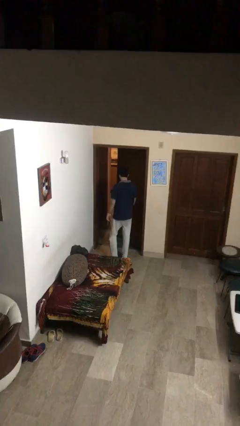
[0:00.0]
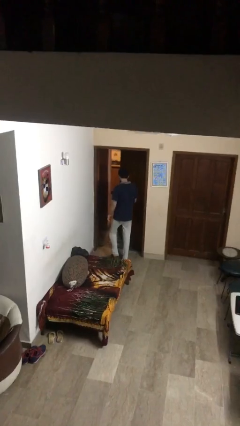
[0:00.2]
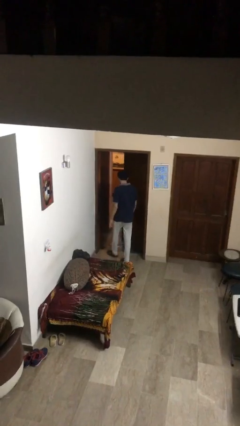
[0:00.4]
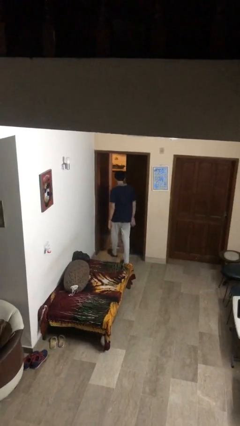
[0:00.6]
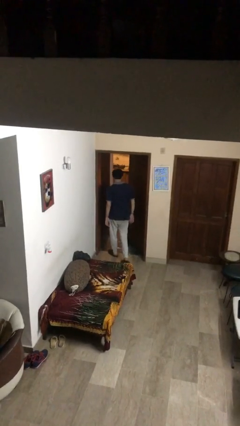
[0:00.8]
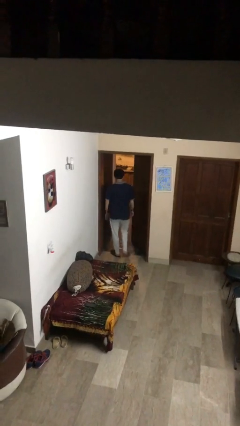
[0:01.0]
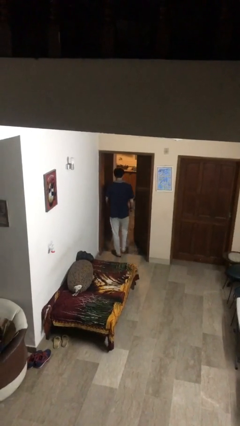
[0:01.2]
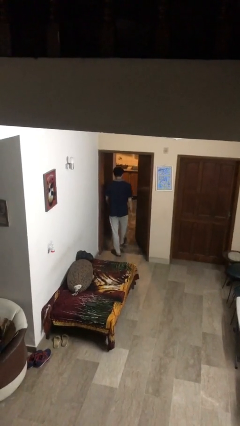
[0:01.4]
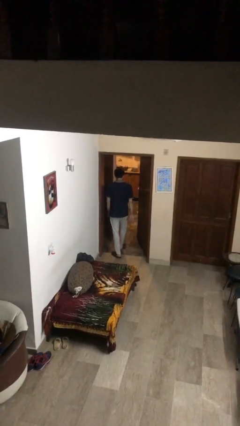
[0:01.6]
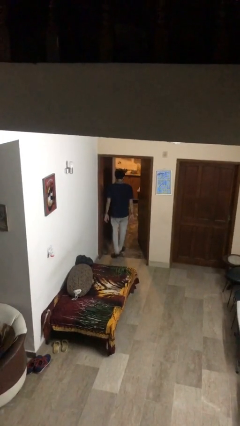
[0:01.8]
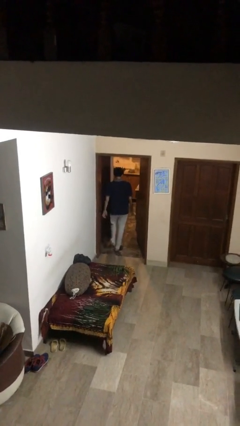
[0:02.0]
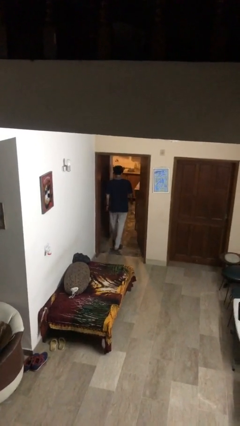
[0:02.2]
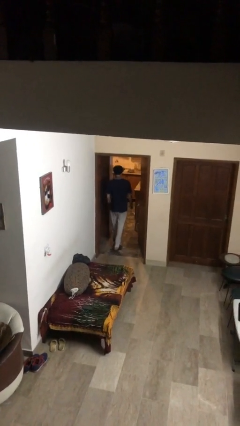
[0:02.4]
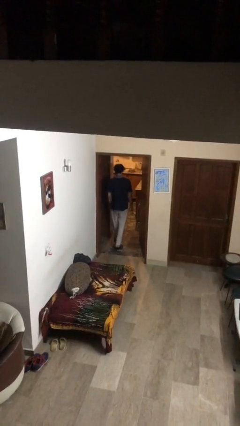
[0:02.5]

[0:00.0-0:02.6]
person exits scene through structure

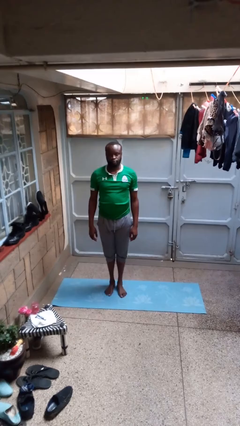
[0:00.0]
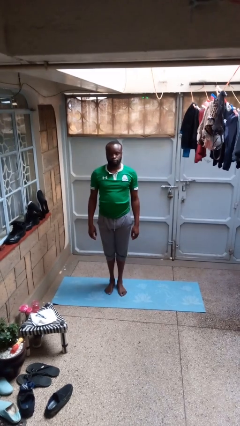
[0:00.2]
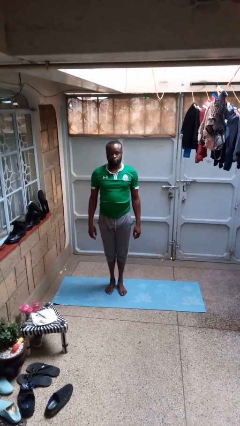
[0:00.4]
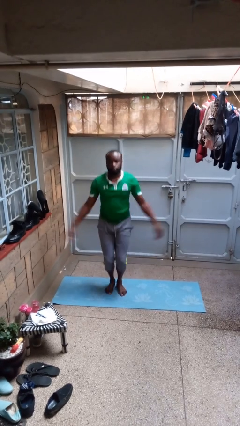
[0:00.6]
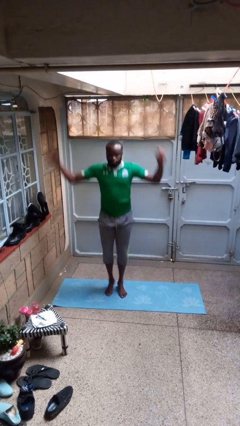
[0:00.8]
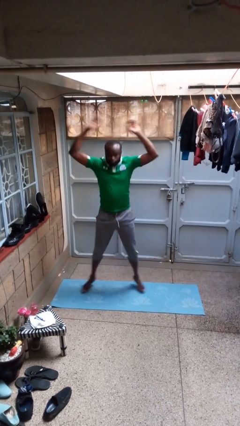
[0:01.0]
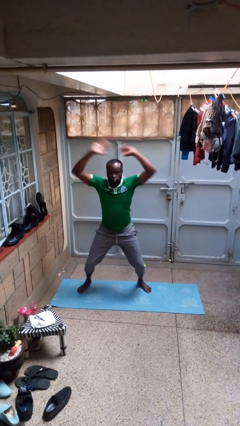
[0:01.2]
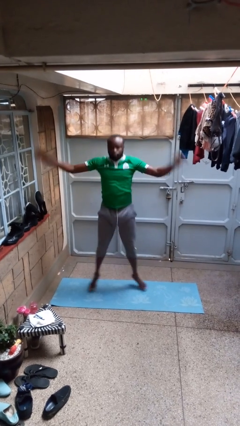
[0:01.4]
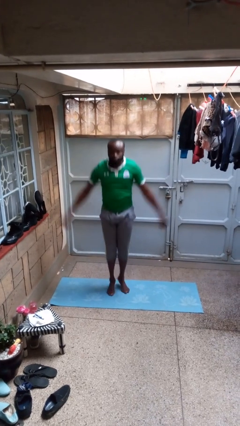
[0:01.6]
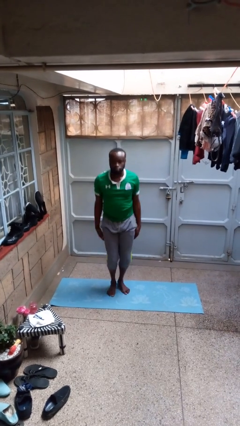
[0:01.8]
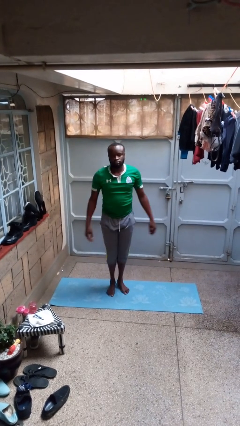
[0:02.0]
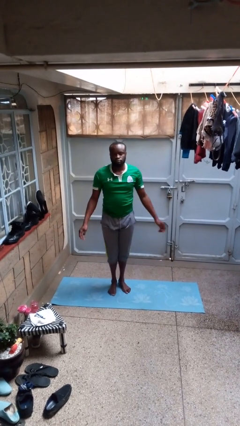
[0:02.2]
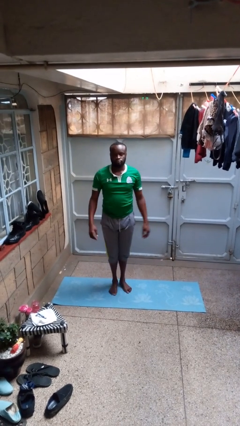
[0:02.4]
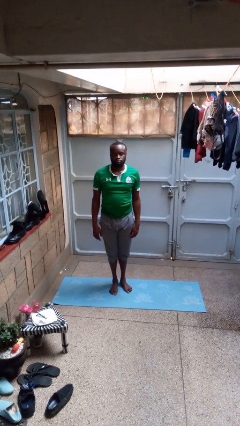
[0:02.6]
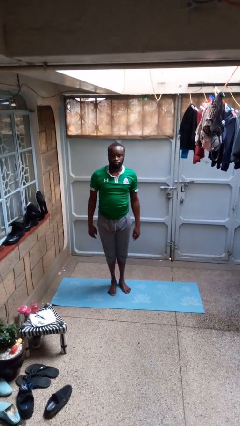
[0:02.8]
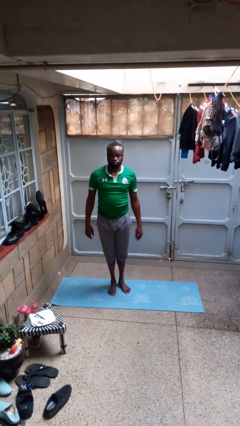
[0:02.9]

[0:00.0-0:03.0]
person exercises with jumping jacks

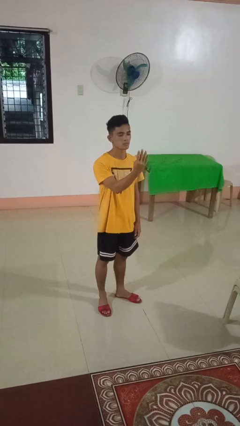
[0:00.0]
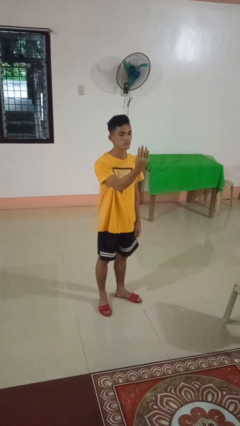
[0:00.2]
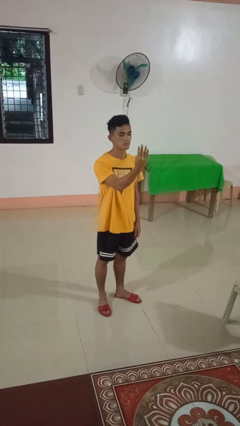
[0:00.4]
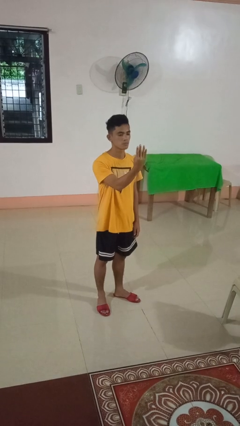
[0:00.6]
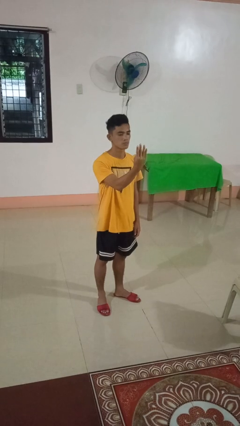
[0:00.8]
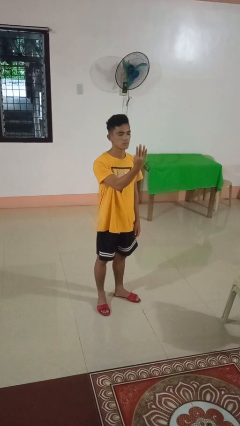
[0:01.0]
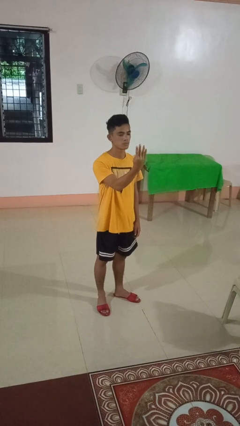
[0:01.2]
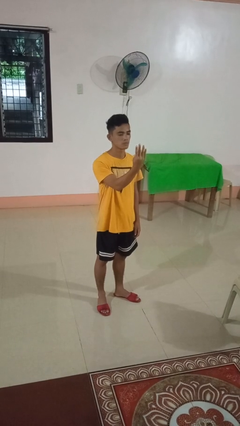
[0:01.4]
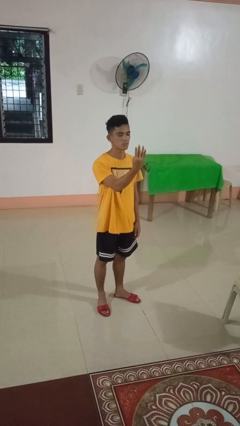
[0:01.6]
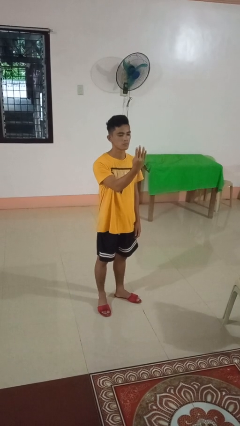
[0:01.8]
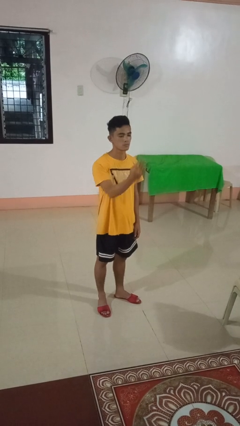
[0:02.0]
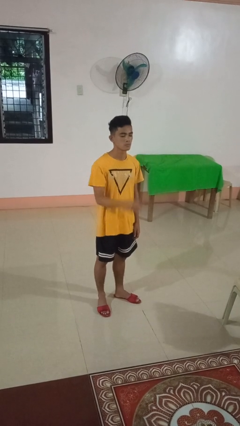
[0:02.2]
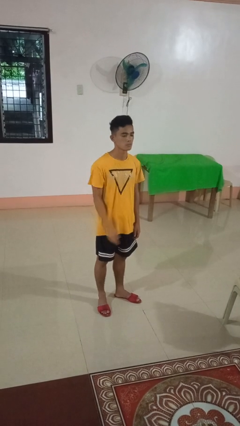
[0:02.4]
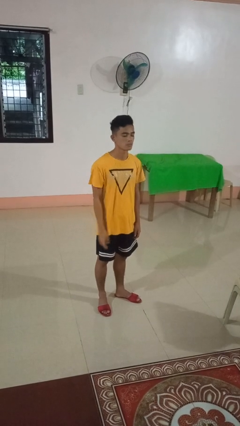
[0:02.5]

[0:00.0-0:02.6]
person gestures number four

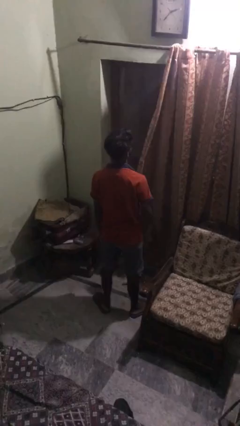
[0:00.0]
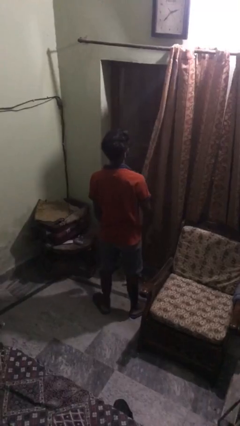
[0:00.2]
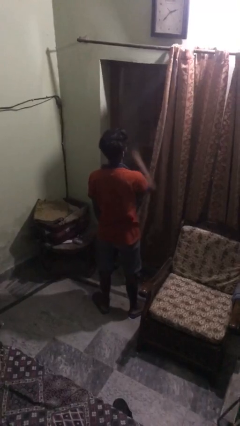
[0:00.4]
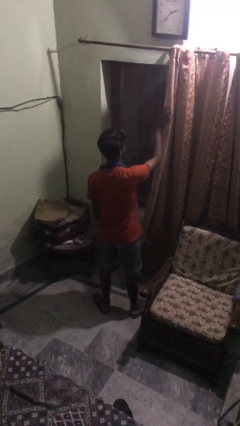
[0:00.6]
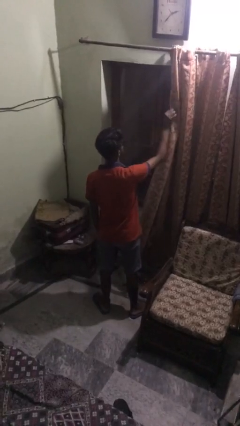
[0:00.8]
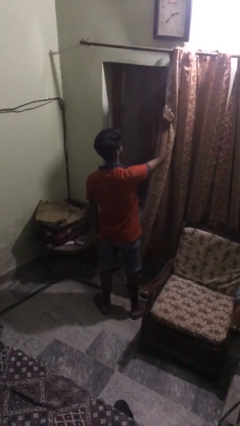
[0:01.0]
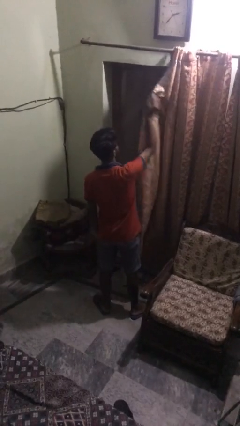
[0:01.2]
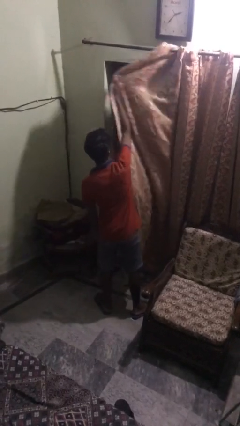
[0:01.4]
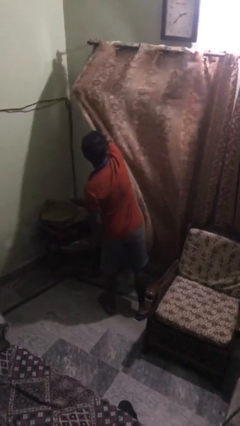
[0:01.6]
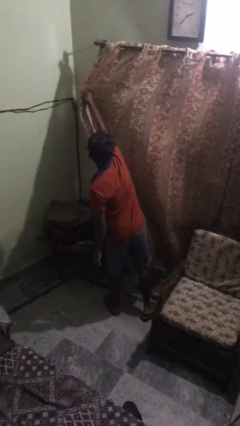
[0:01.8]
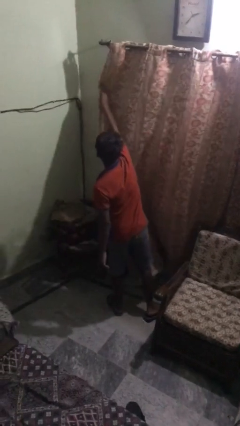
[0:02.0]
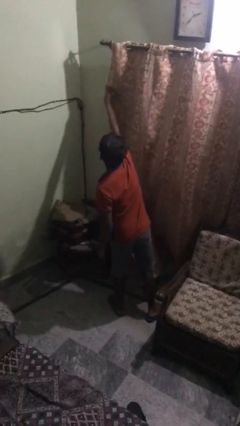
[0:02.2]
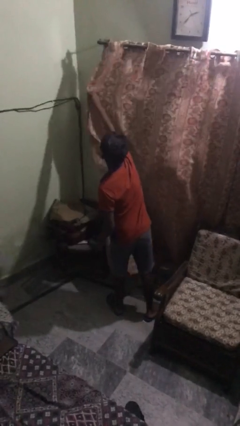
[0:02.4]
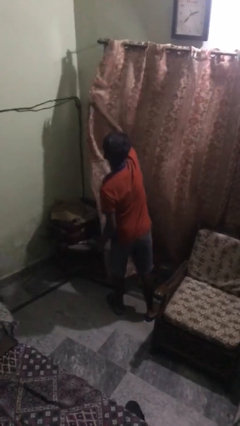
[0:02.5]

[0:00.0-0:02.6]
person closes curtains

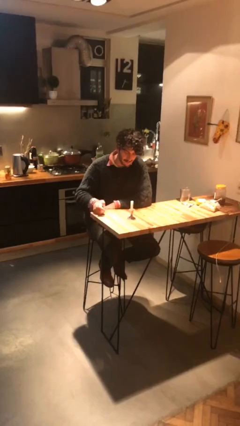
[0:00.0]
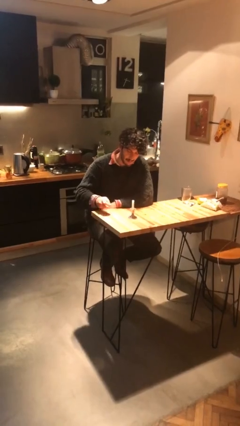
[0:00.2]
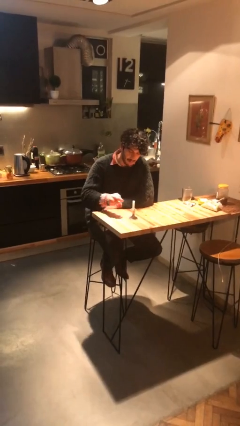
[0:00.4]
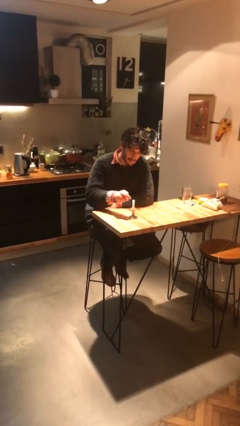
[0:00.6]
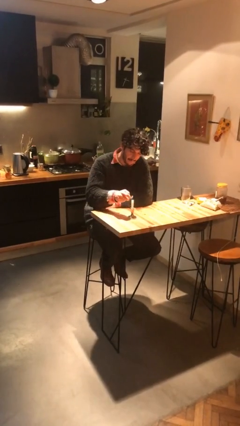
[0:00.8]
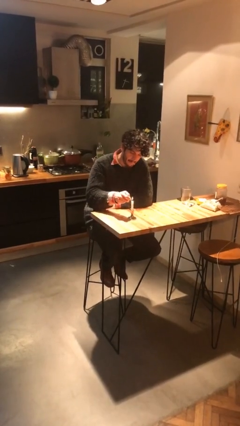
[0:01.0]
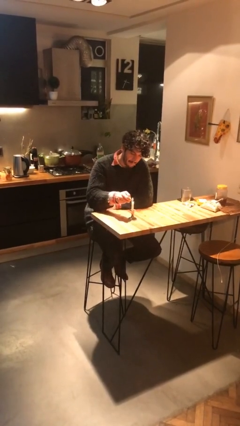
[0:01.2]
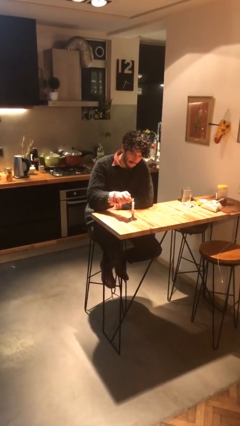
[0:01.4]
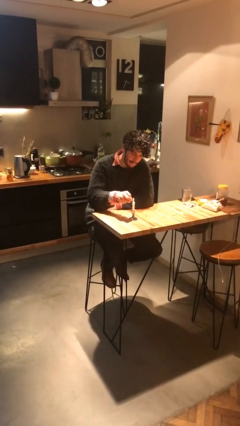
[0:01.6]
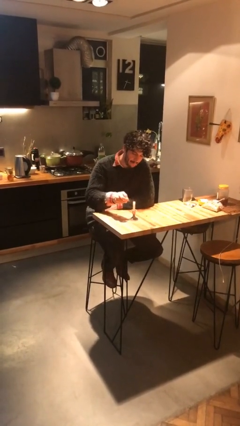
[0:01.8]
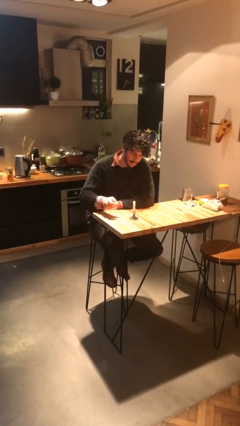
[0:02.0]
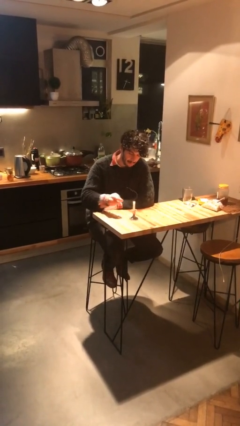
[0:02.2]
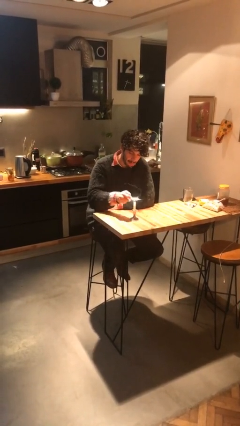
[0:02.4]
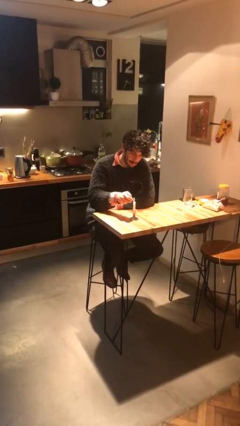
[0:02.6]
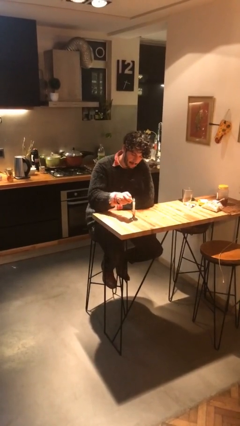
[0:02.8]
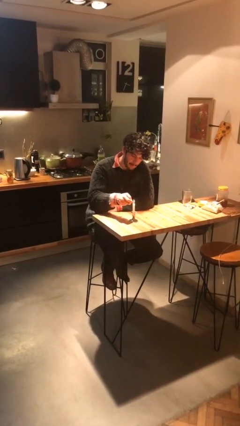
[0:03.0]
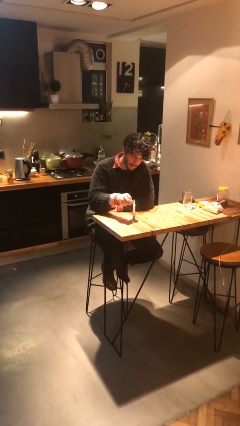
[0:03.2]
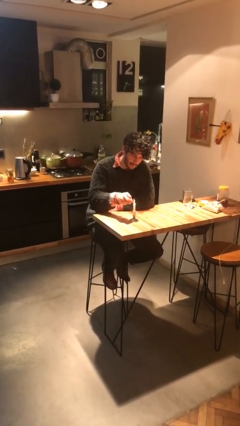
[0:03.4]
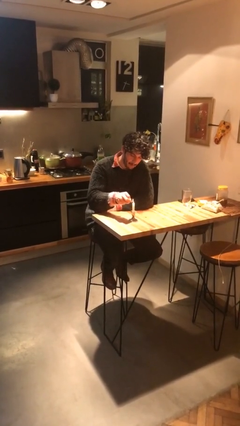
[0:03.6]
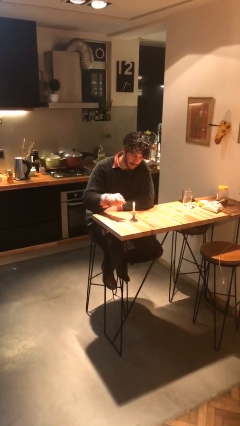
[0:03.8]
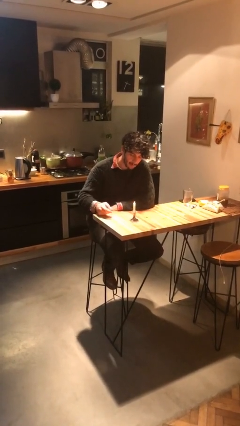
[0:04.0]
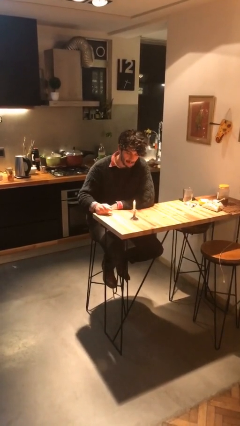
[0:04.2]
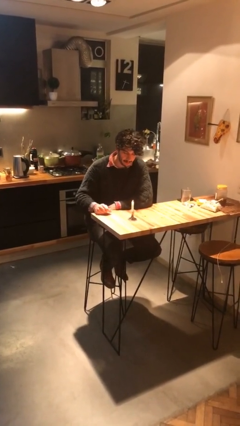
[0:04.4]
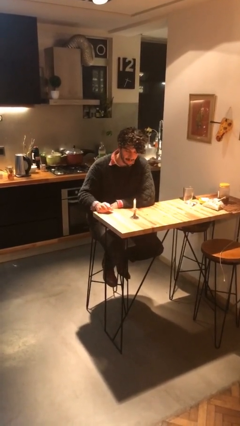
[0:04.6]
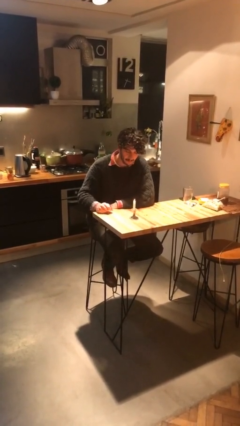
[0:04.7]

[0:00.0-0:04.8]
person lights candle

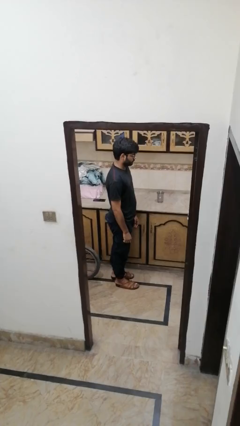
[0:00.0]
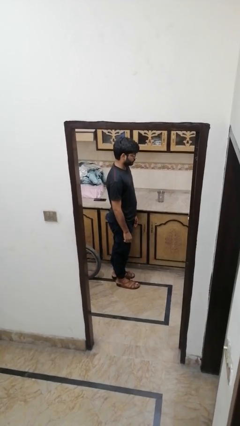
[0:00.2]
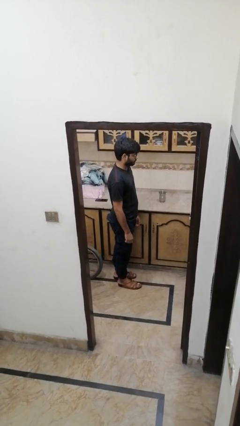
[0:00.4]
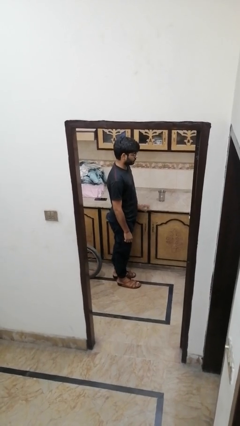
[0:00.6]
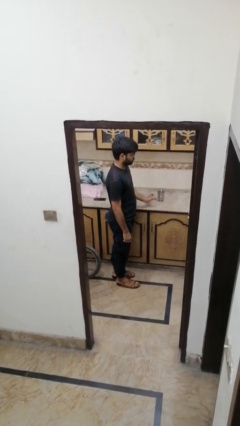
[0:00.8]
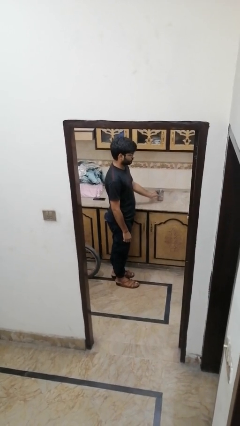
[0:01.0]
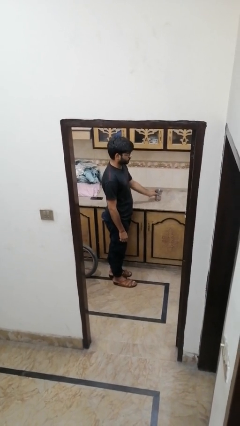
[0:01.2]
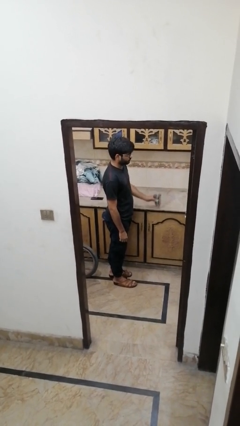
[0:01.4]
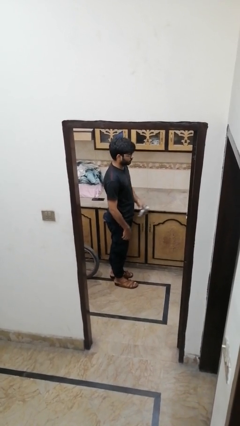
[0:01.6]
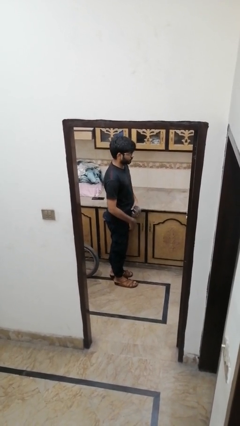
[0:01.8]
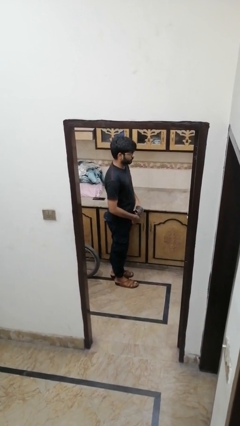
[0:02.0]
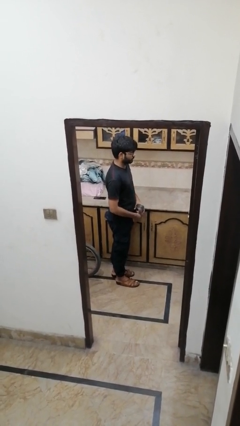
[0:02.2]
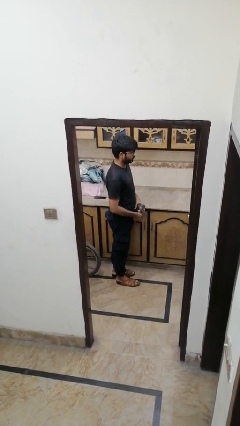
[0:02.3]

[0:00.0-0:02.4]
person picks up object from countertop
